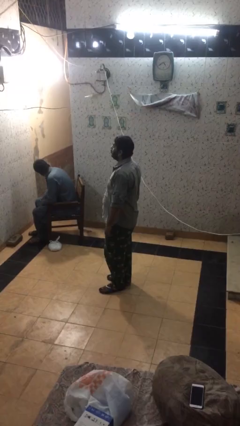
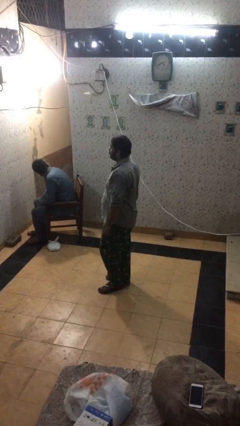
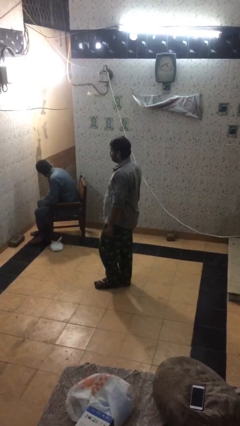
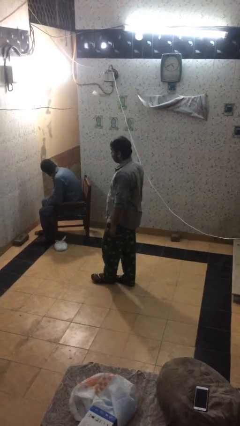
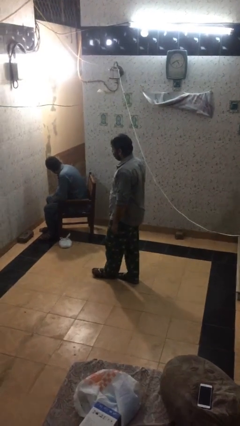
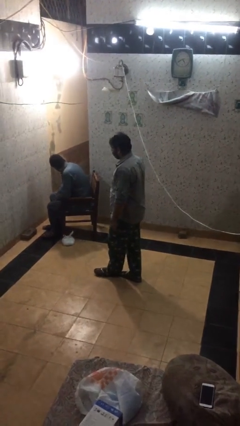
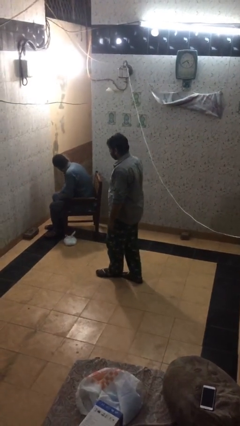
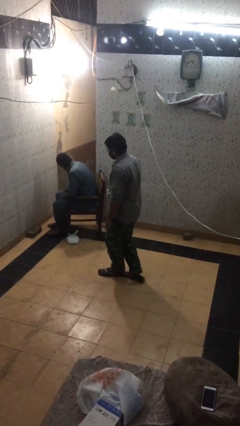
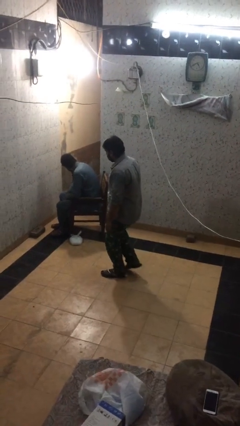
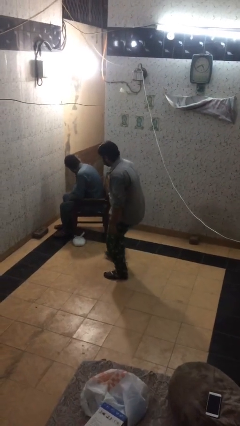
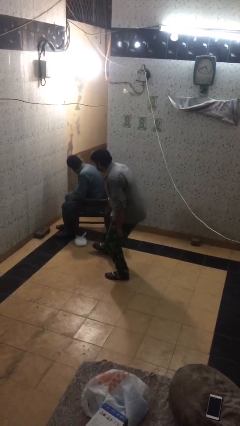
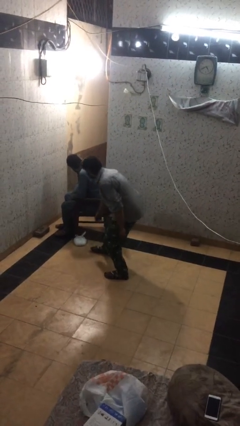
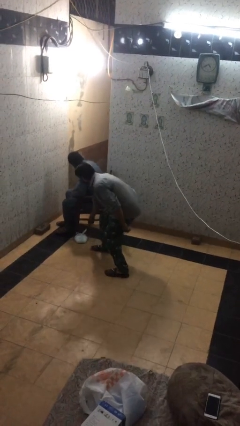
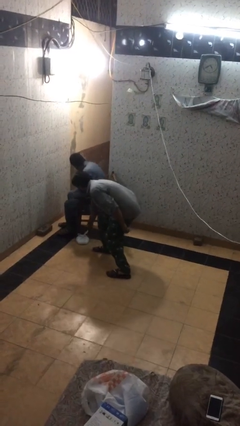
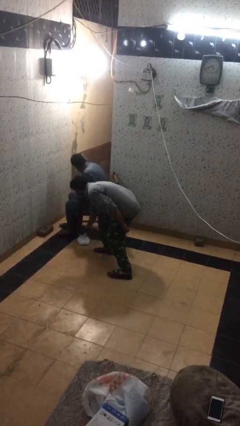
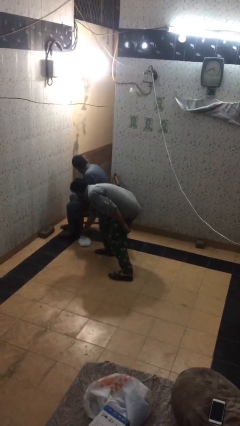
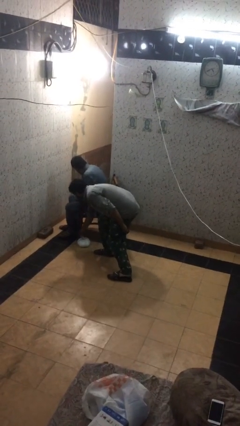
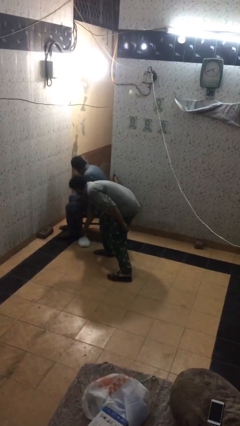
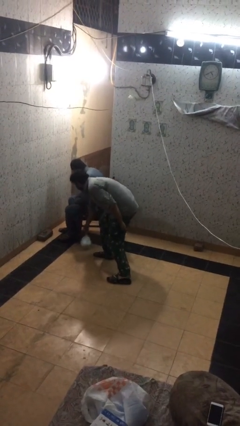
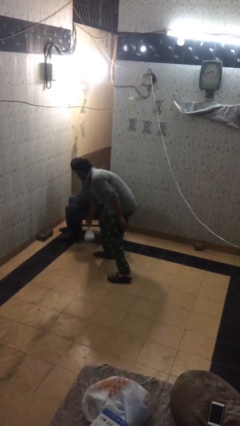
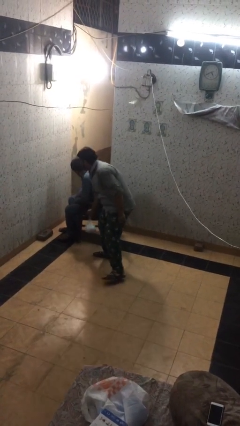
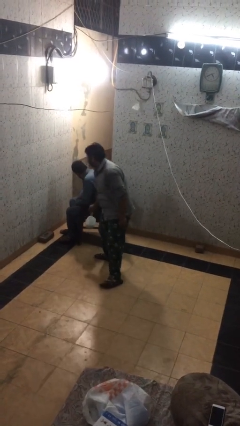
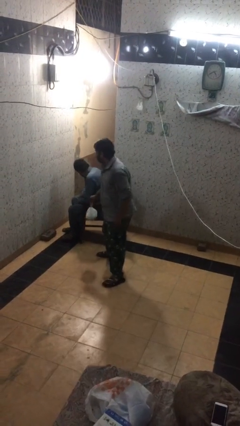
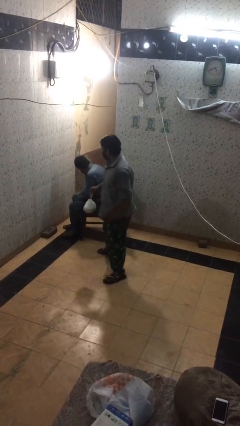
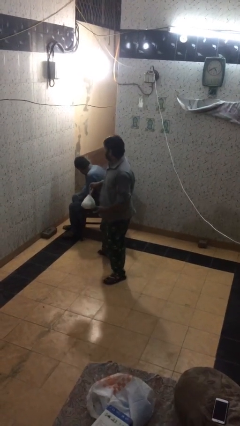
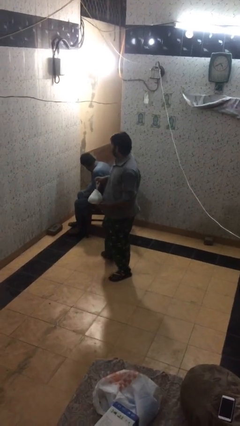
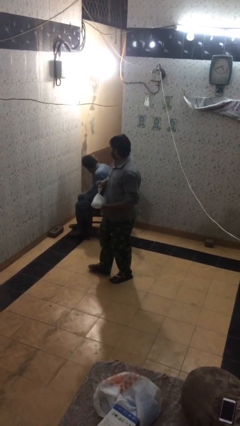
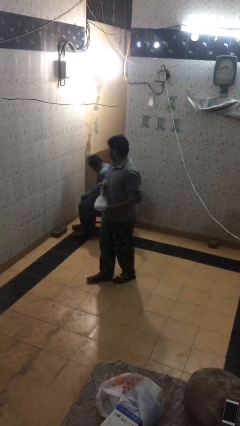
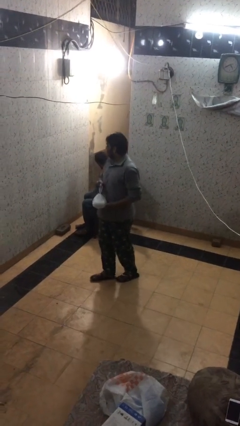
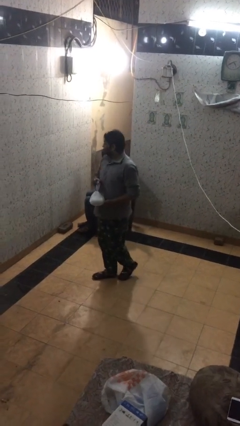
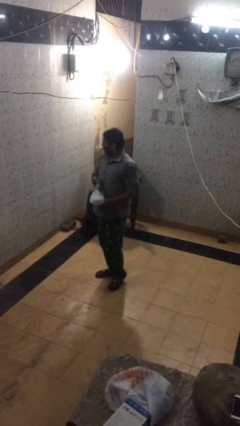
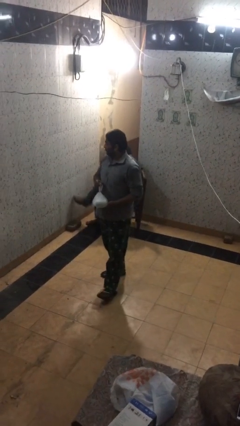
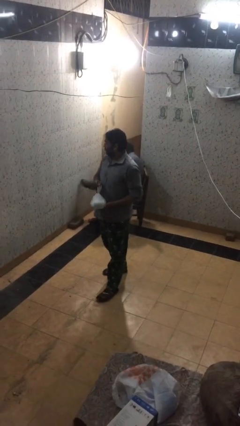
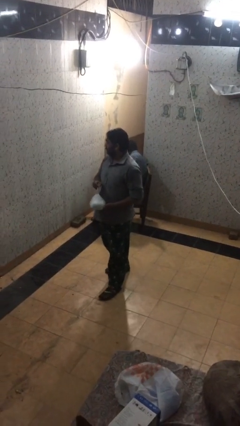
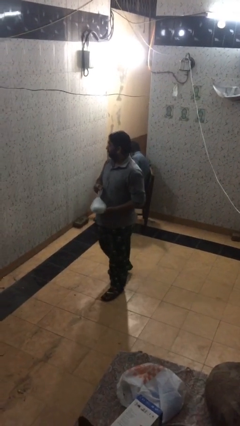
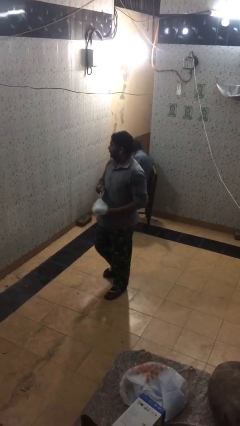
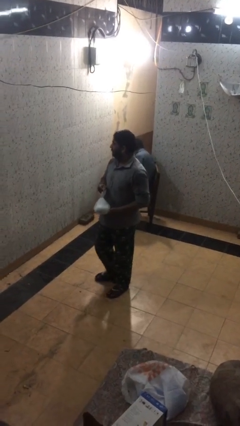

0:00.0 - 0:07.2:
person steals object from person

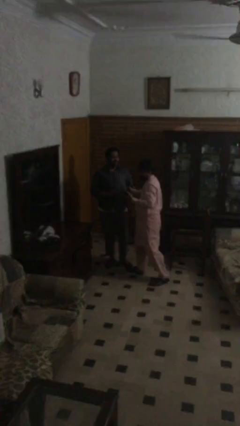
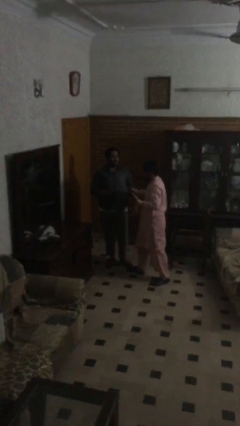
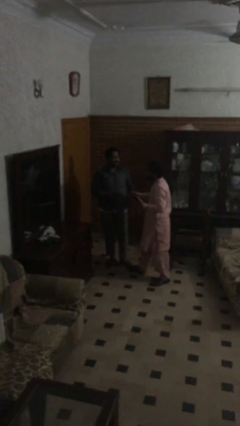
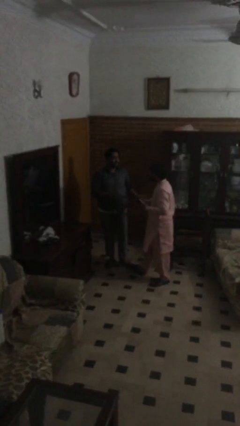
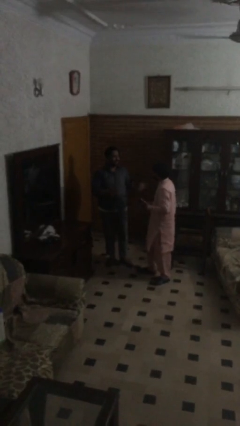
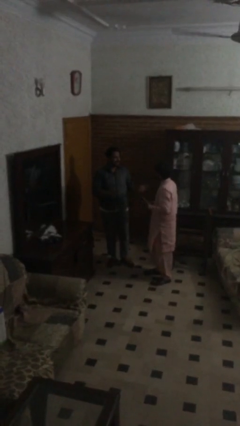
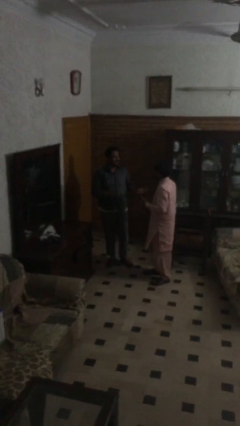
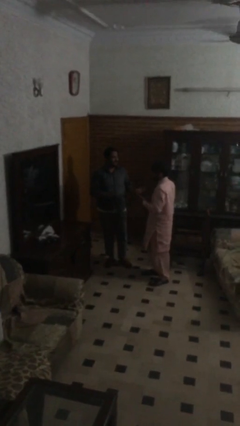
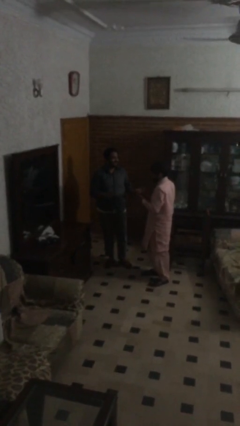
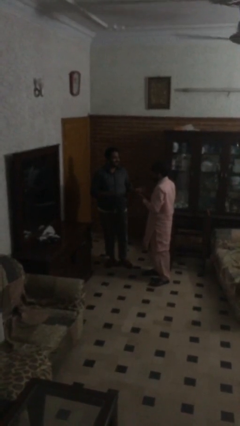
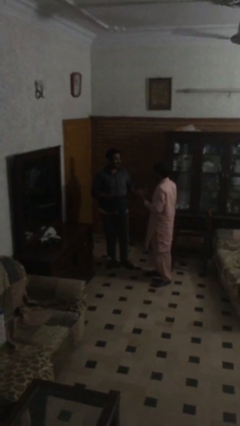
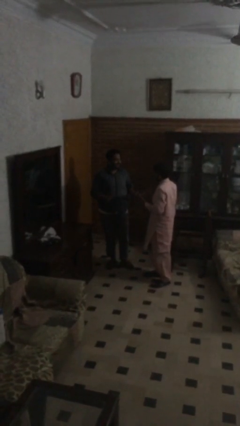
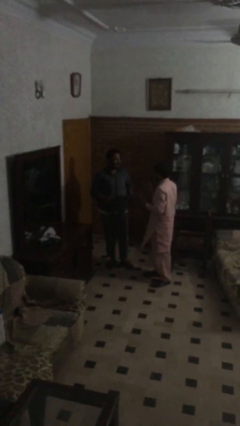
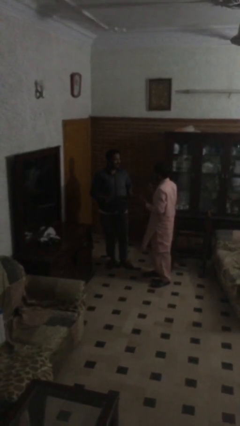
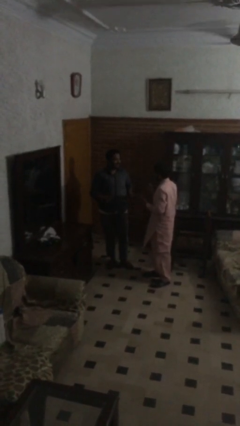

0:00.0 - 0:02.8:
person talks to person

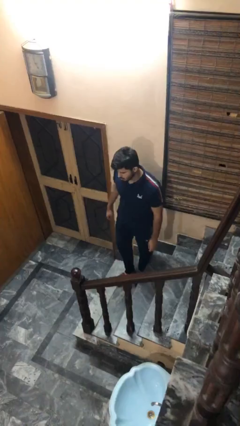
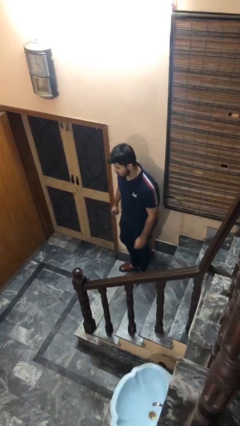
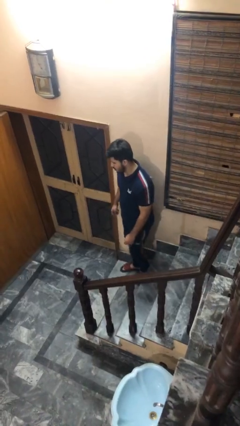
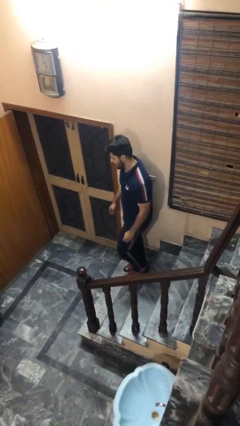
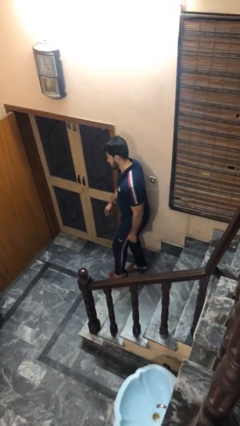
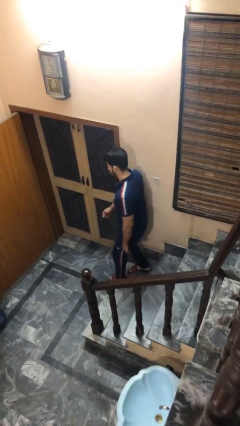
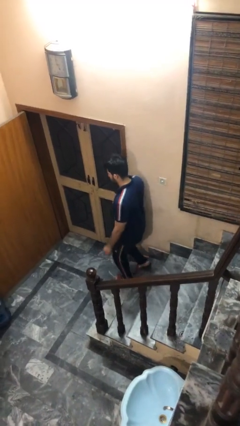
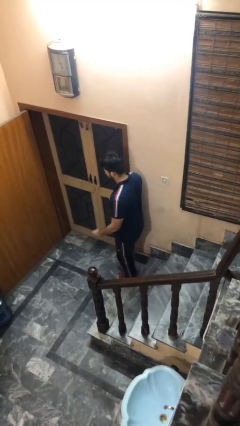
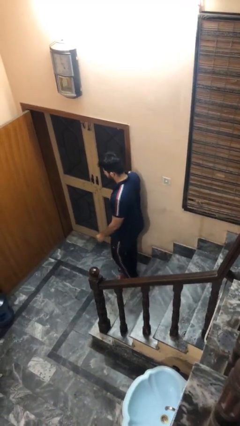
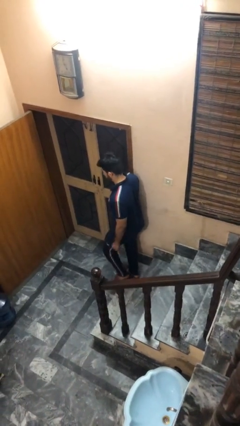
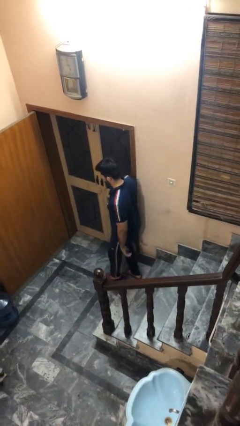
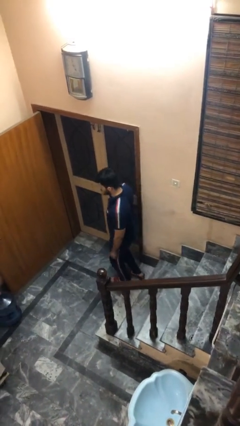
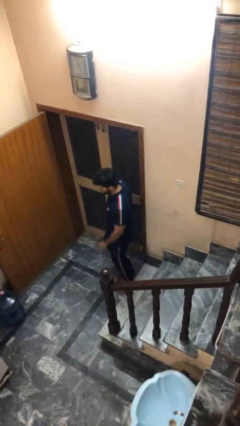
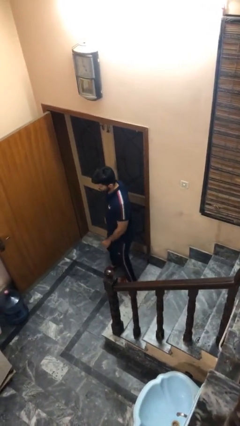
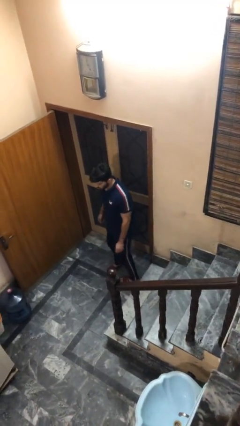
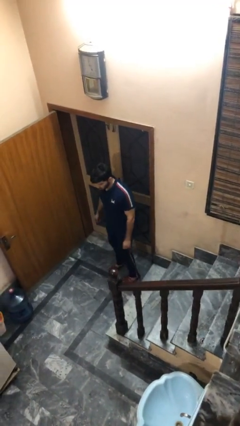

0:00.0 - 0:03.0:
person climbs down stairs

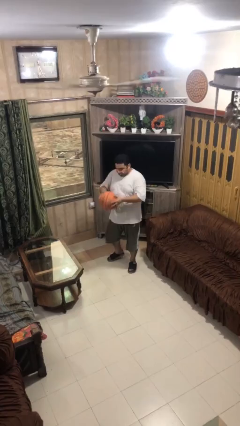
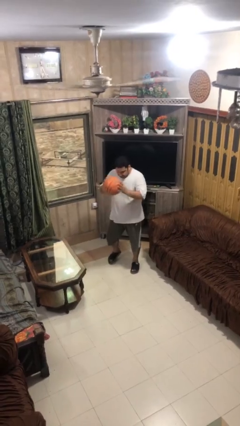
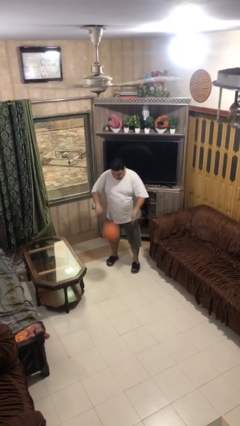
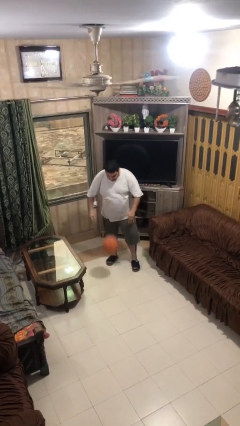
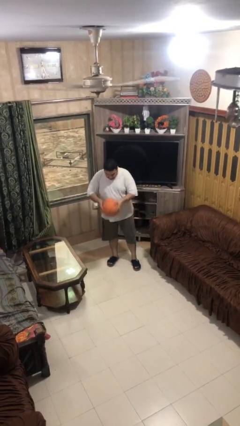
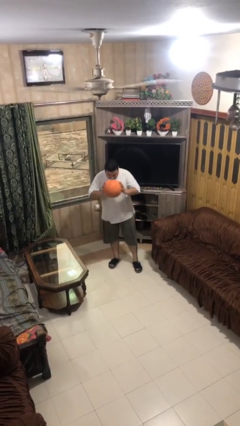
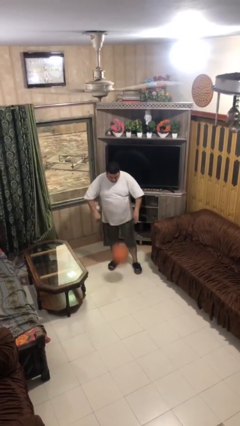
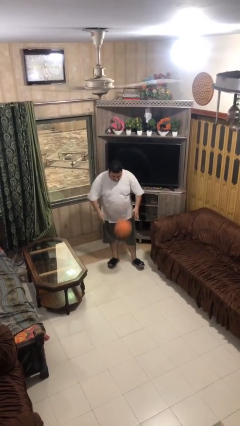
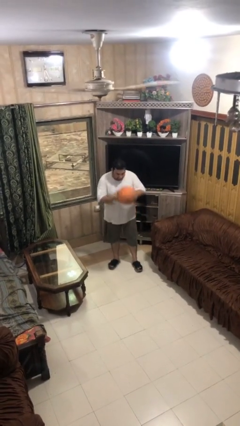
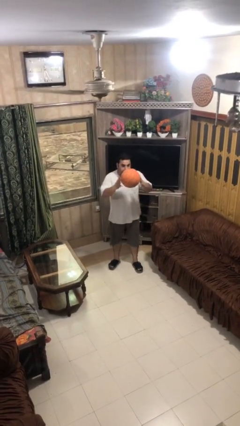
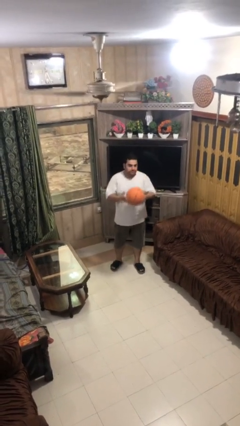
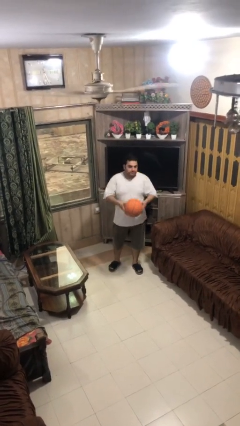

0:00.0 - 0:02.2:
person bounces ball on floor

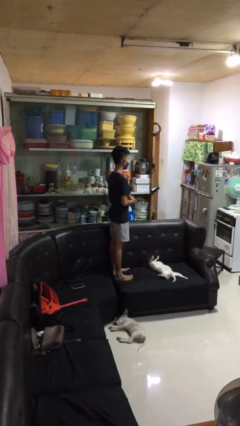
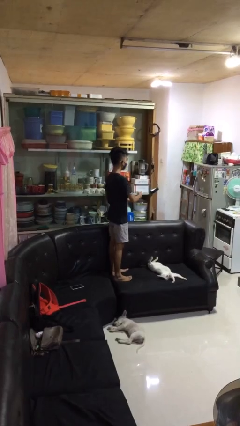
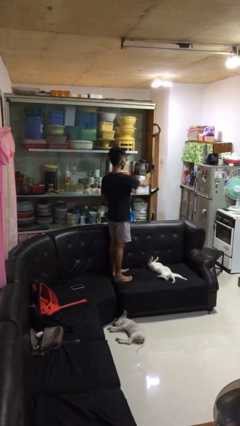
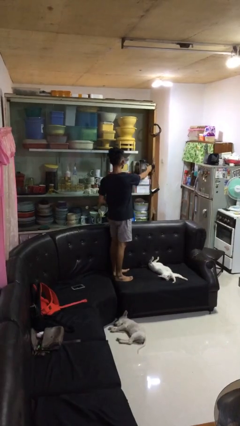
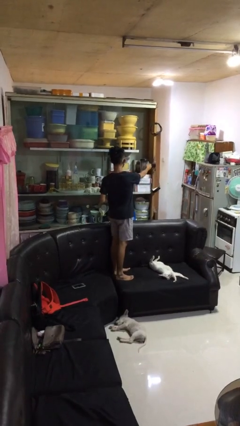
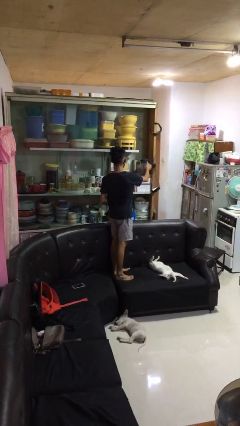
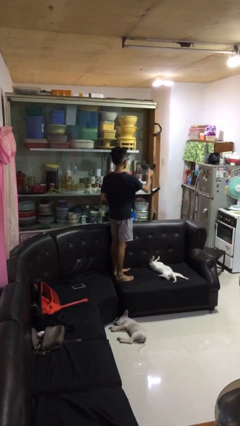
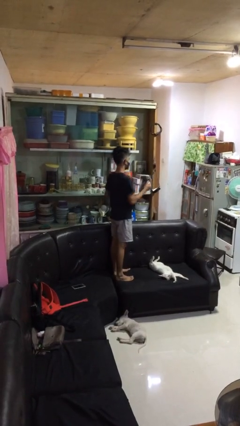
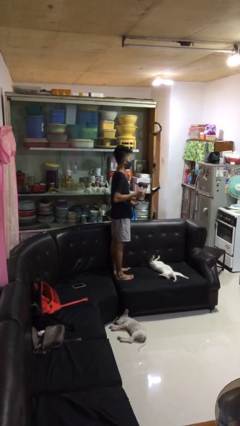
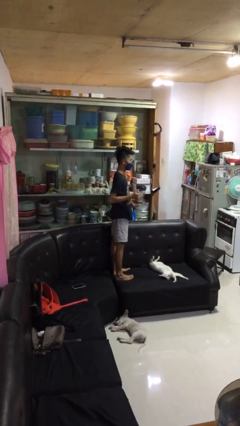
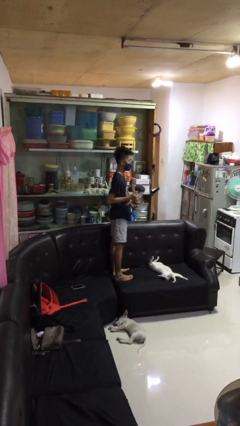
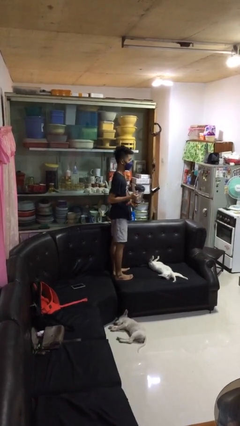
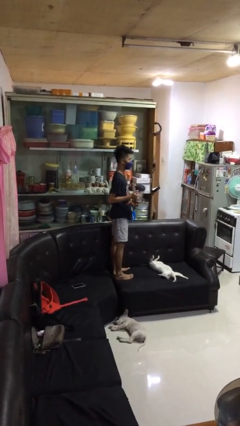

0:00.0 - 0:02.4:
person picks up object from cabinet
